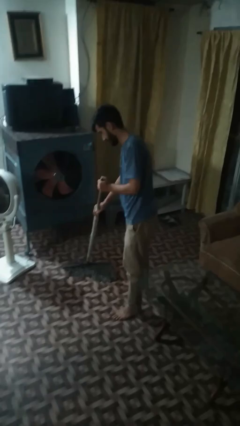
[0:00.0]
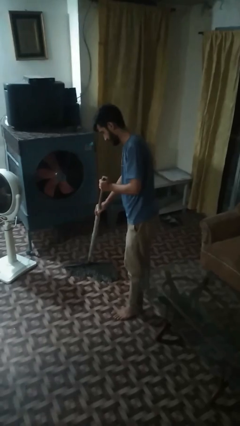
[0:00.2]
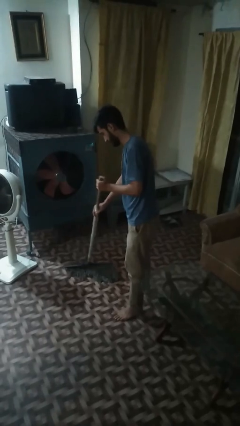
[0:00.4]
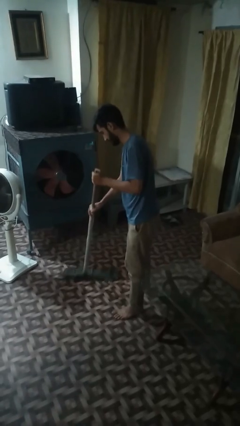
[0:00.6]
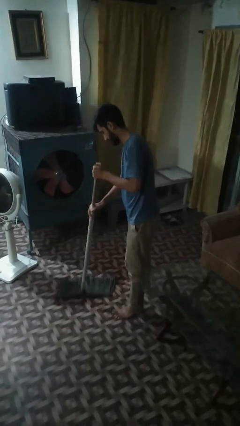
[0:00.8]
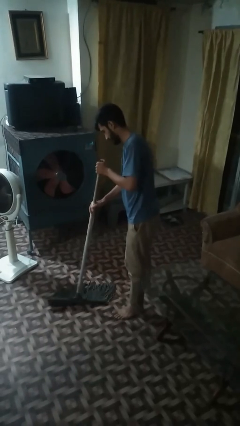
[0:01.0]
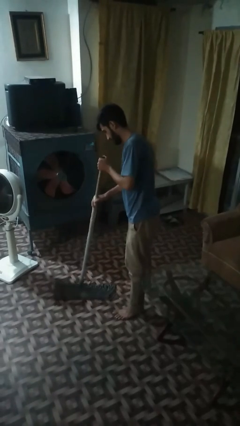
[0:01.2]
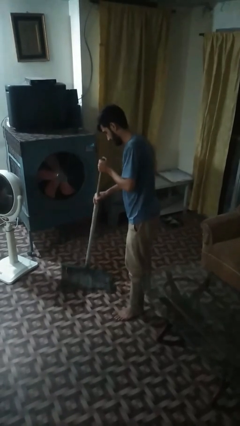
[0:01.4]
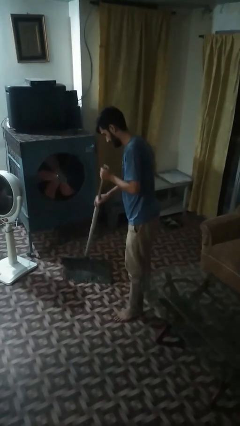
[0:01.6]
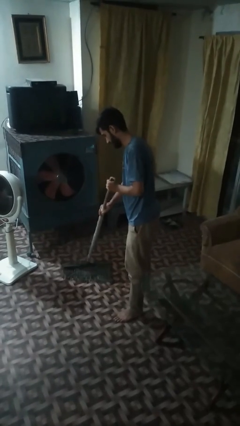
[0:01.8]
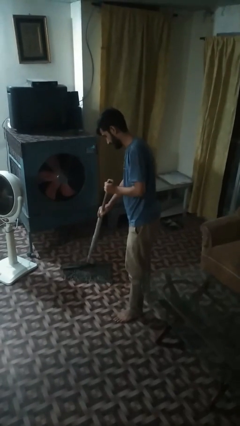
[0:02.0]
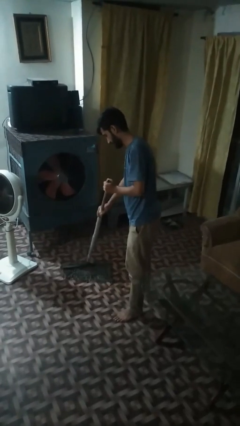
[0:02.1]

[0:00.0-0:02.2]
person mops

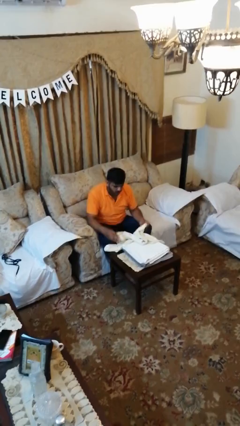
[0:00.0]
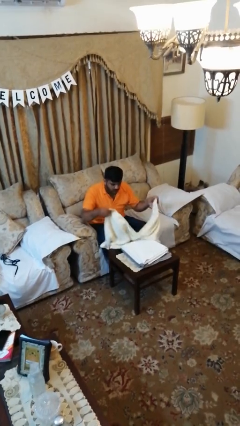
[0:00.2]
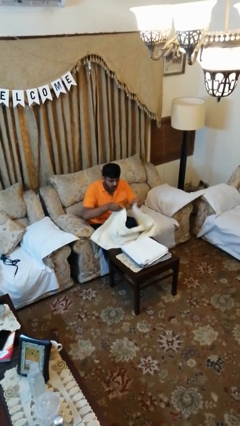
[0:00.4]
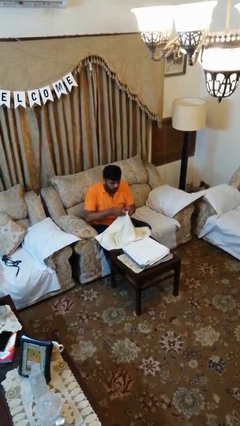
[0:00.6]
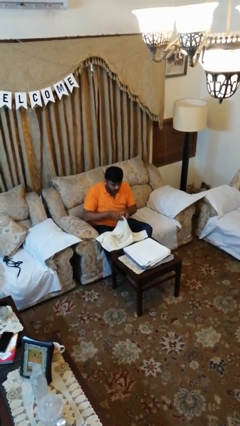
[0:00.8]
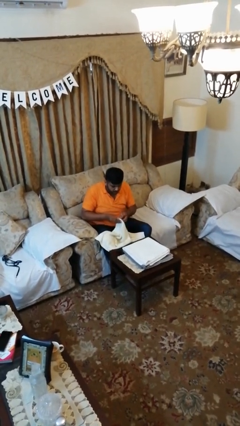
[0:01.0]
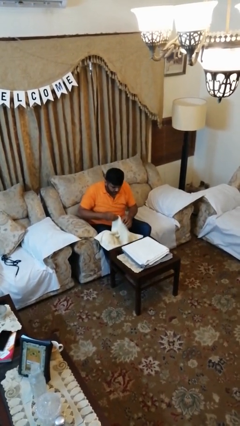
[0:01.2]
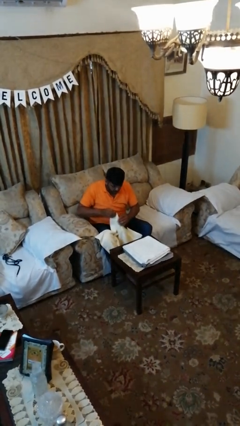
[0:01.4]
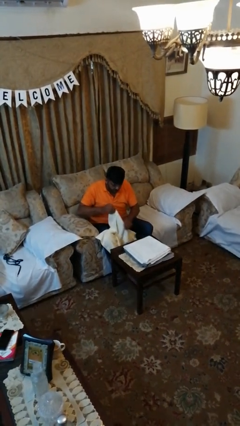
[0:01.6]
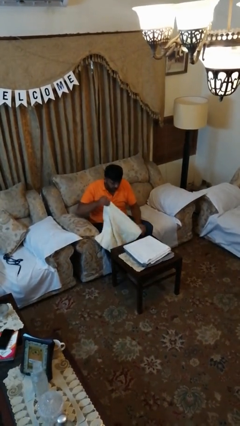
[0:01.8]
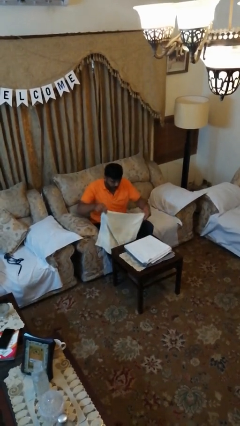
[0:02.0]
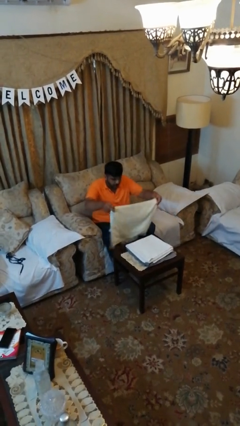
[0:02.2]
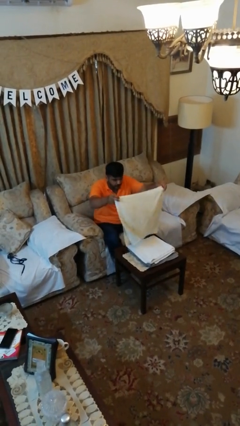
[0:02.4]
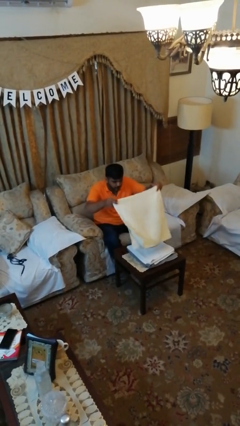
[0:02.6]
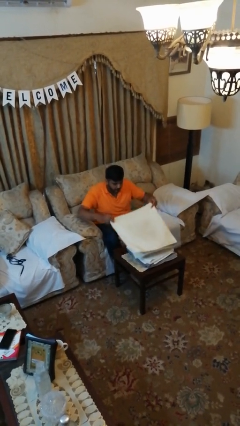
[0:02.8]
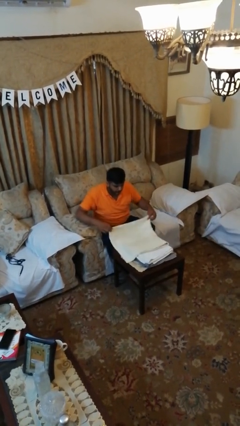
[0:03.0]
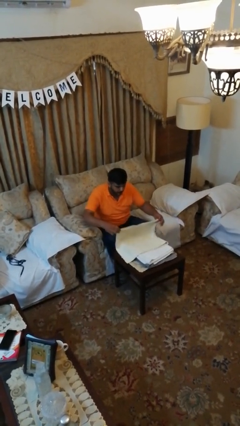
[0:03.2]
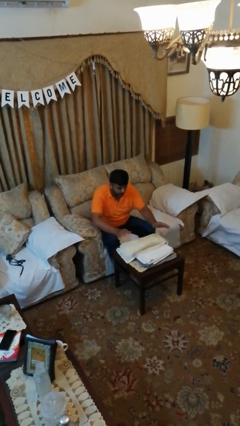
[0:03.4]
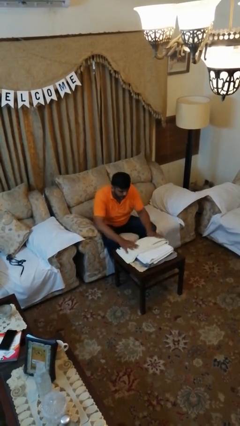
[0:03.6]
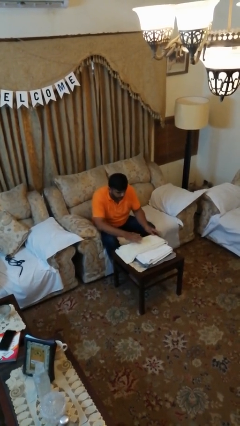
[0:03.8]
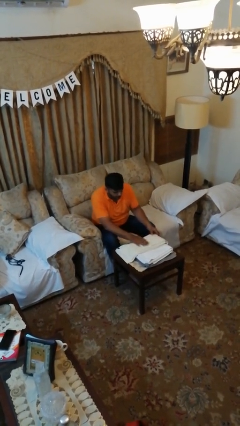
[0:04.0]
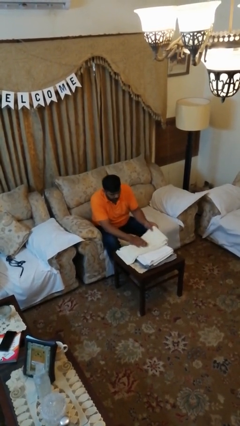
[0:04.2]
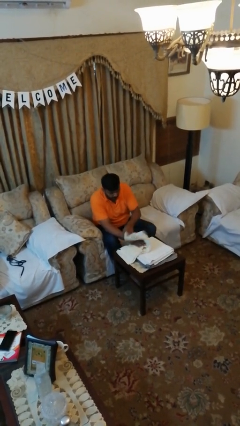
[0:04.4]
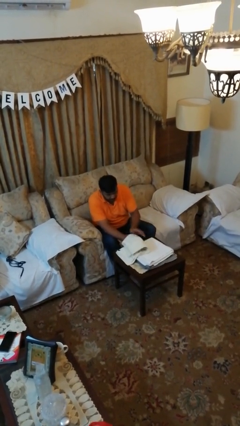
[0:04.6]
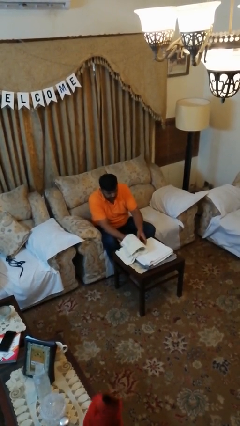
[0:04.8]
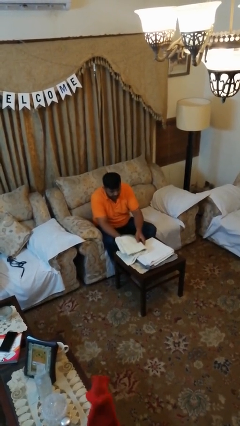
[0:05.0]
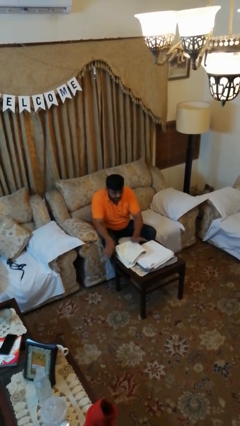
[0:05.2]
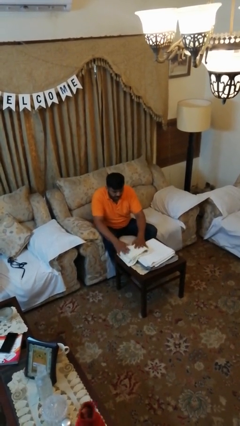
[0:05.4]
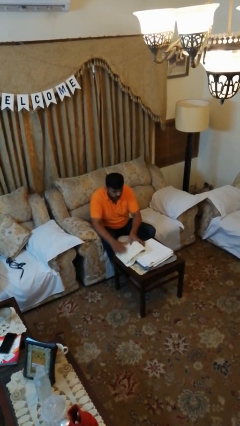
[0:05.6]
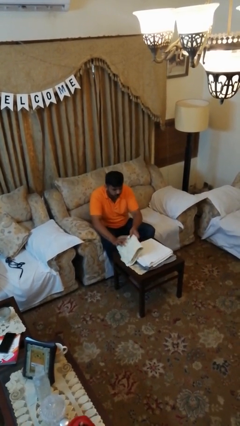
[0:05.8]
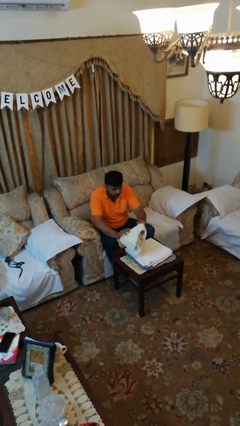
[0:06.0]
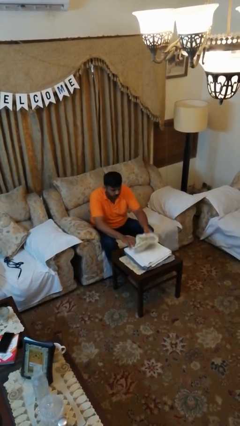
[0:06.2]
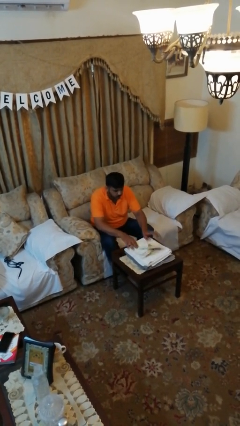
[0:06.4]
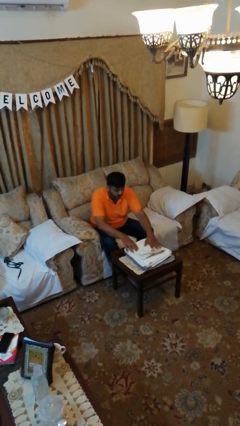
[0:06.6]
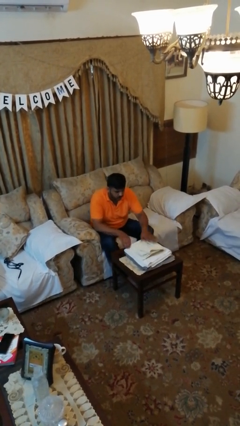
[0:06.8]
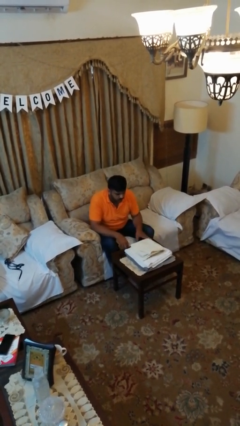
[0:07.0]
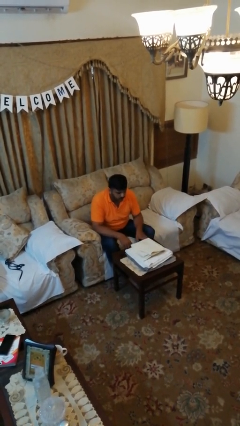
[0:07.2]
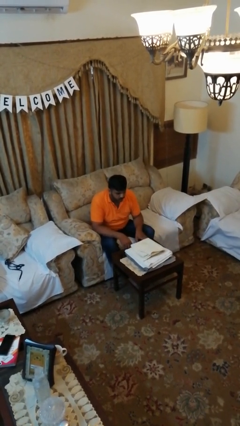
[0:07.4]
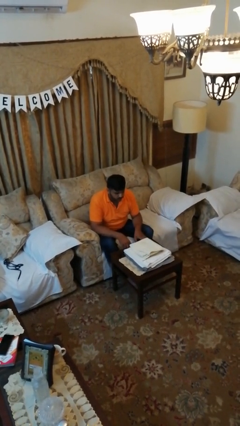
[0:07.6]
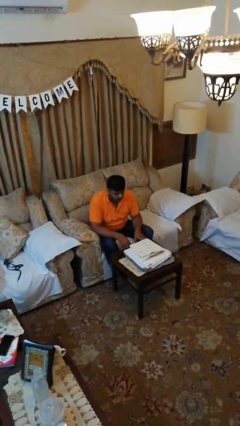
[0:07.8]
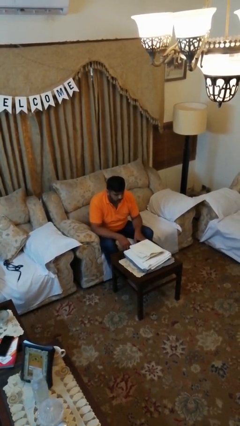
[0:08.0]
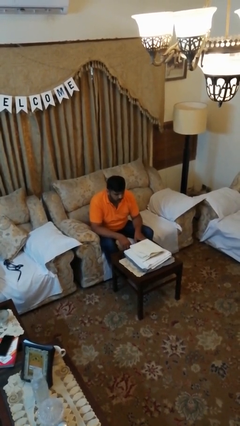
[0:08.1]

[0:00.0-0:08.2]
person folds towel

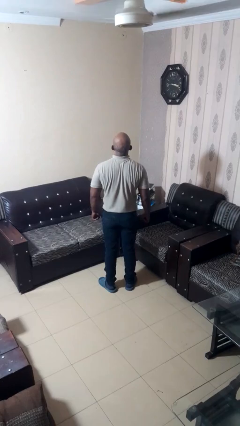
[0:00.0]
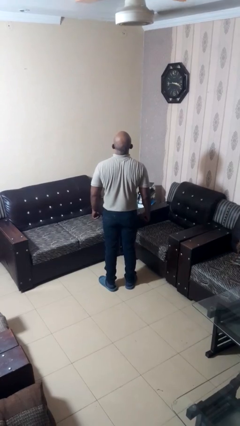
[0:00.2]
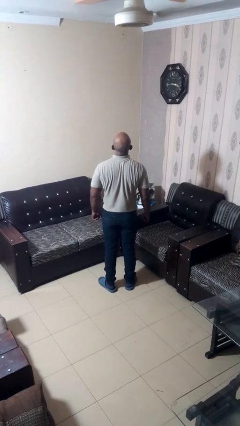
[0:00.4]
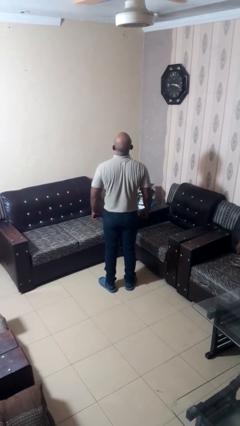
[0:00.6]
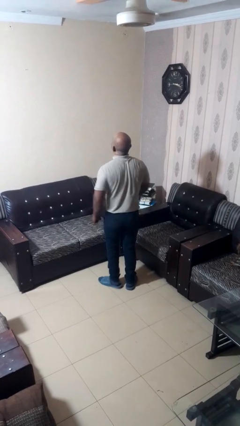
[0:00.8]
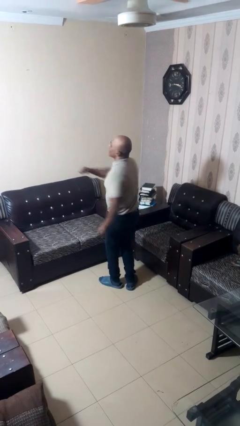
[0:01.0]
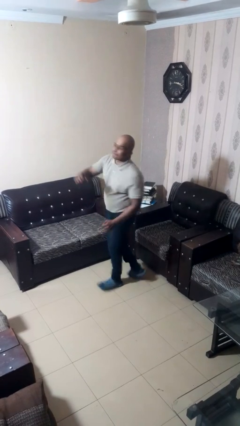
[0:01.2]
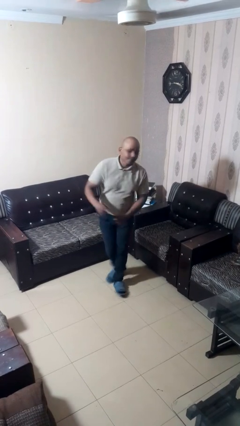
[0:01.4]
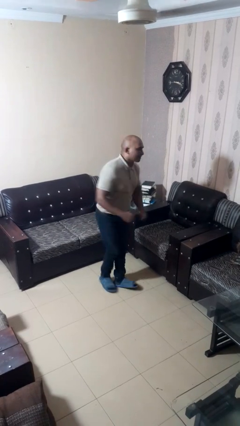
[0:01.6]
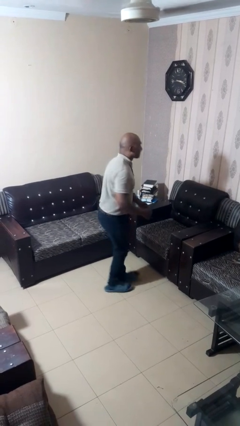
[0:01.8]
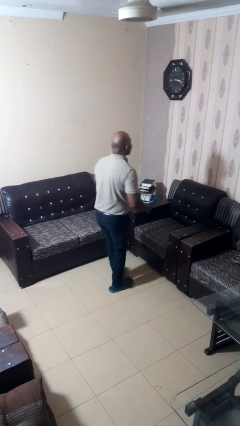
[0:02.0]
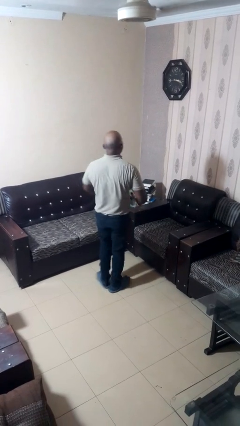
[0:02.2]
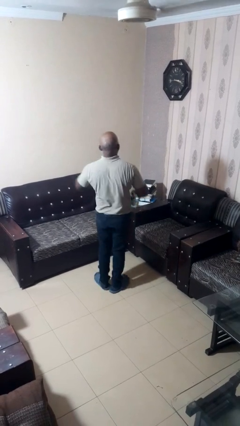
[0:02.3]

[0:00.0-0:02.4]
person twirls

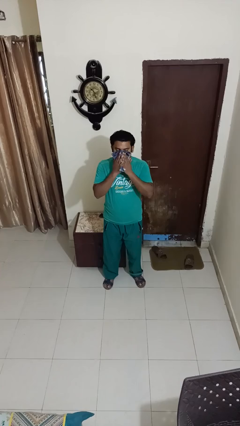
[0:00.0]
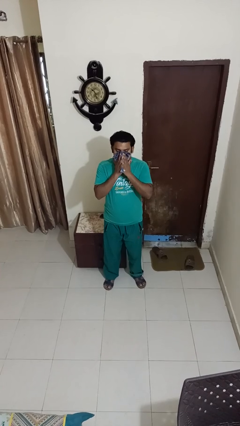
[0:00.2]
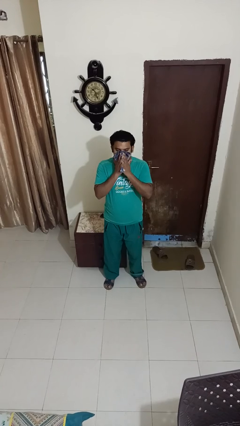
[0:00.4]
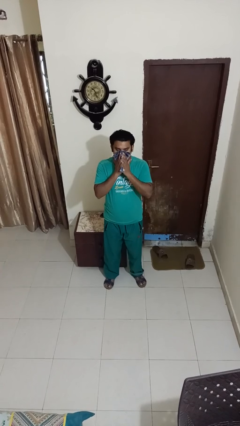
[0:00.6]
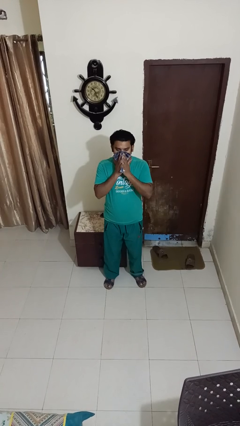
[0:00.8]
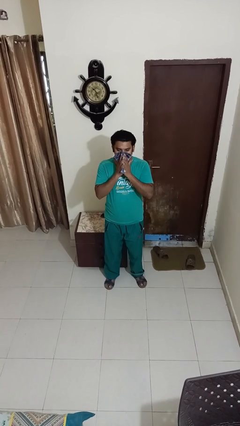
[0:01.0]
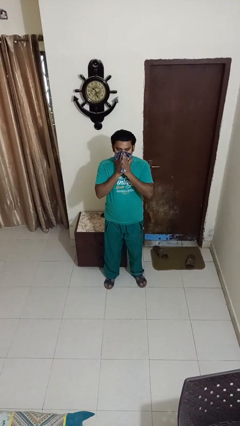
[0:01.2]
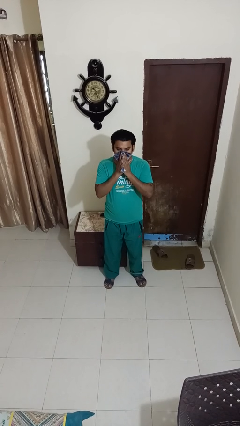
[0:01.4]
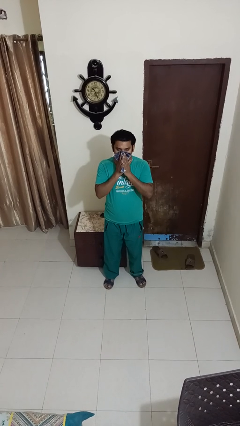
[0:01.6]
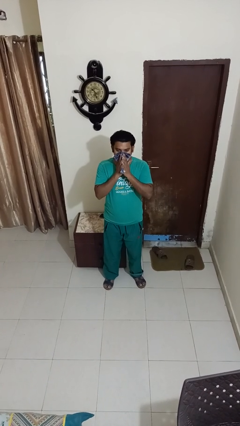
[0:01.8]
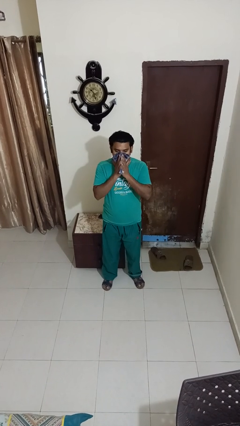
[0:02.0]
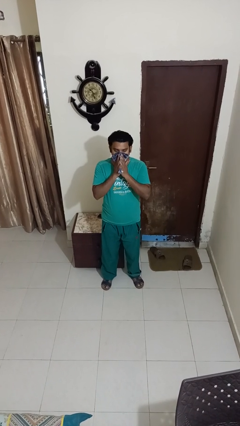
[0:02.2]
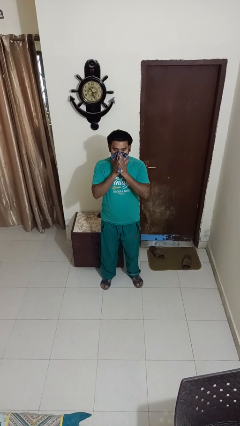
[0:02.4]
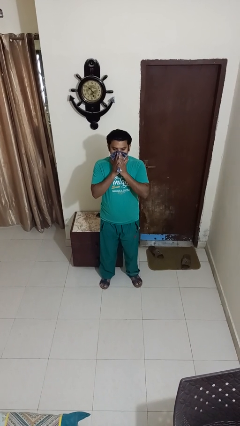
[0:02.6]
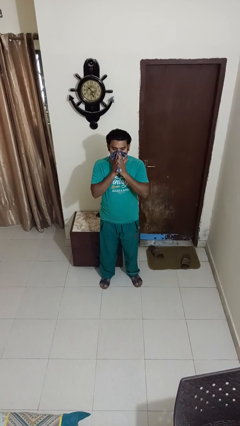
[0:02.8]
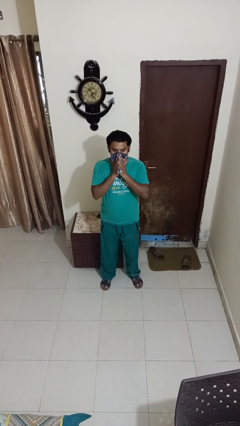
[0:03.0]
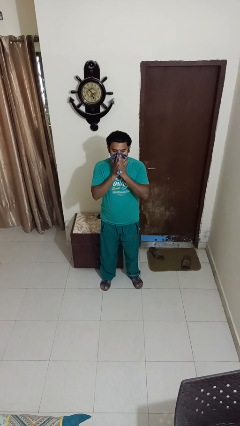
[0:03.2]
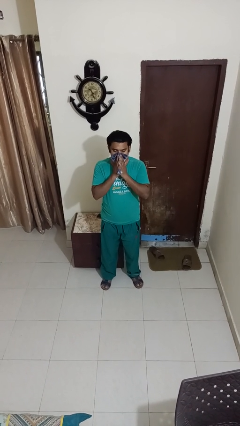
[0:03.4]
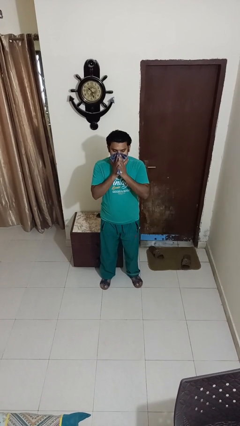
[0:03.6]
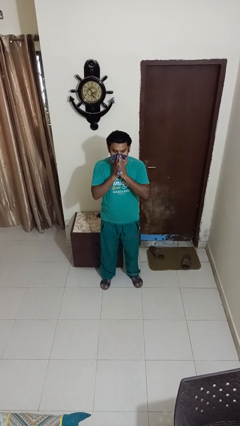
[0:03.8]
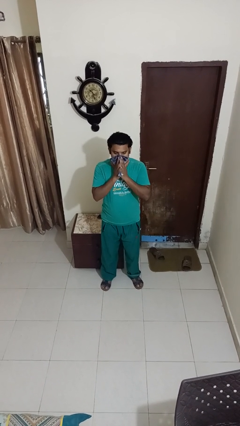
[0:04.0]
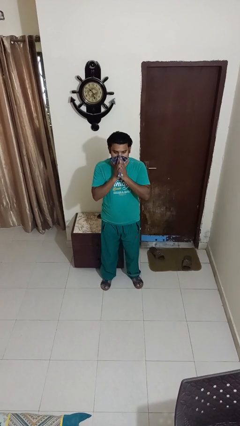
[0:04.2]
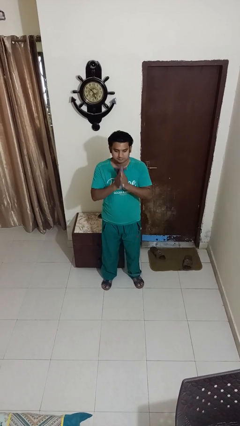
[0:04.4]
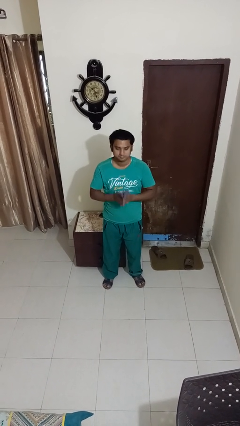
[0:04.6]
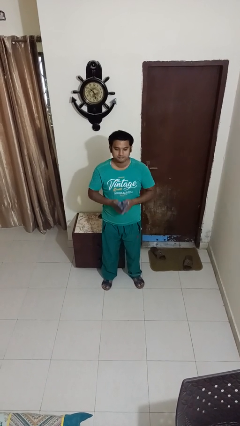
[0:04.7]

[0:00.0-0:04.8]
person blows nose
